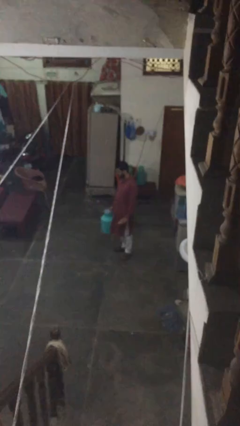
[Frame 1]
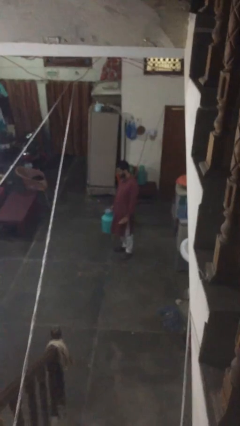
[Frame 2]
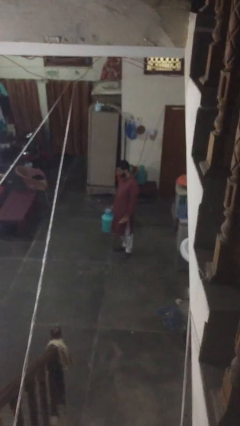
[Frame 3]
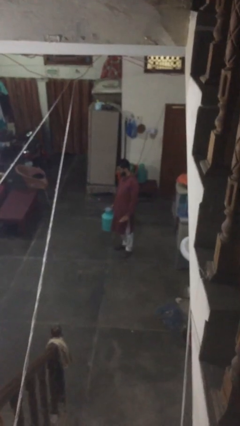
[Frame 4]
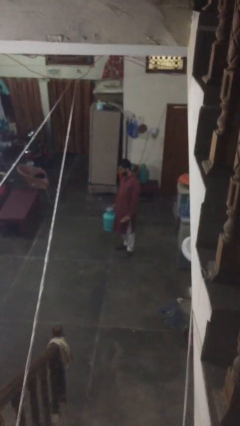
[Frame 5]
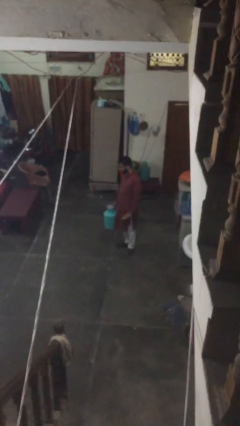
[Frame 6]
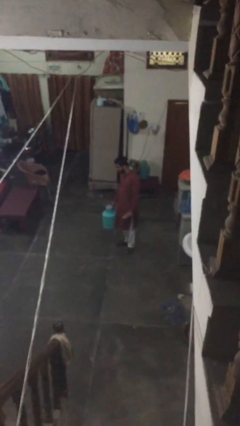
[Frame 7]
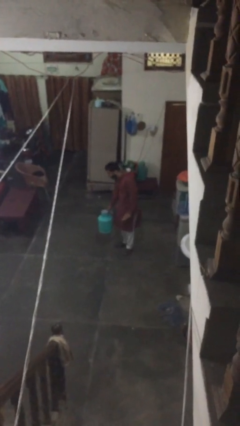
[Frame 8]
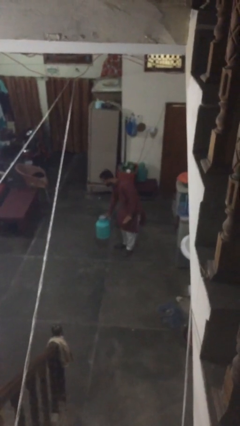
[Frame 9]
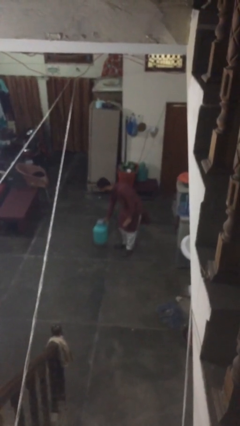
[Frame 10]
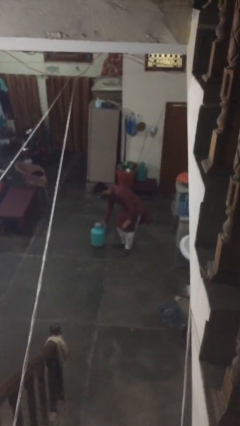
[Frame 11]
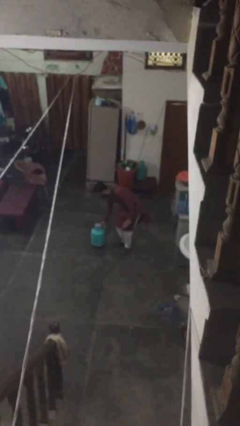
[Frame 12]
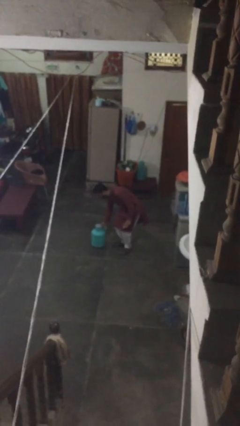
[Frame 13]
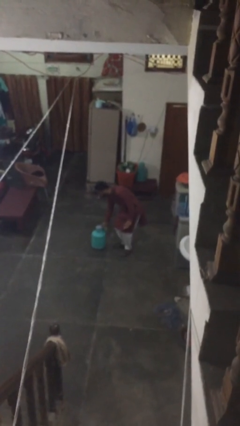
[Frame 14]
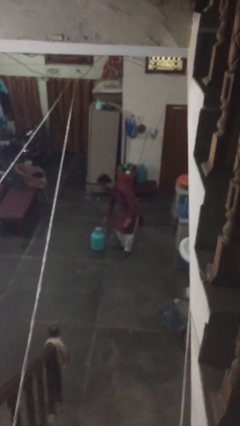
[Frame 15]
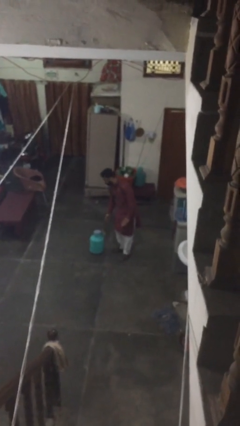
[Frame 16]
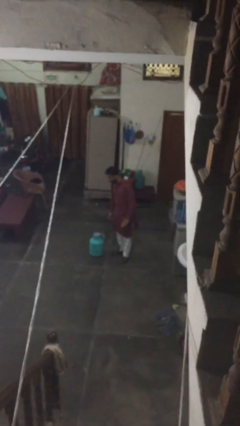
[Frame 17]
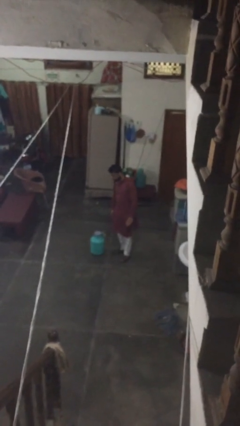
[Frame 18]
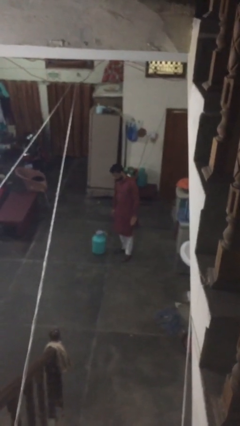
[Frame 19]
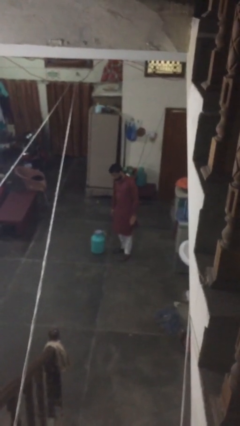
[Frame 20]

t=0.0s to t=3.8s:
person puts down object on floor

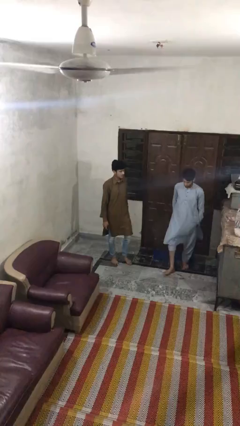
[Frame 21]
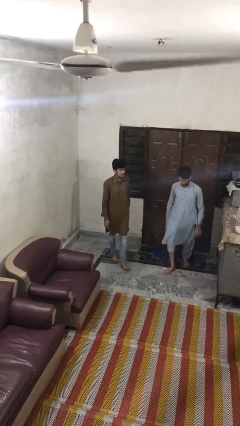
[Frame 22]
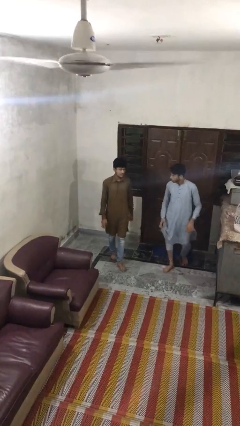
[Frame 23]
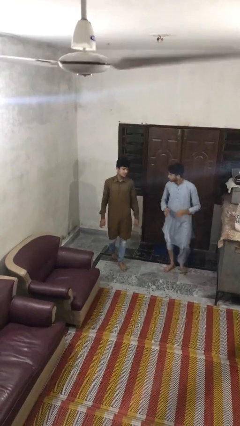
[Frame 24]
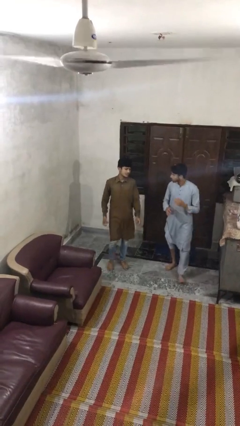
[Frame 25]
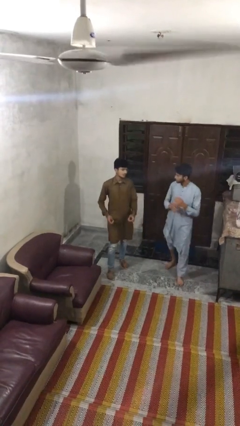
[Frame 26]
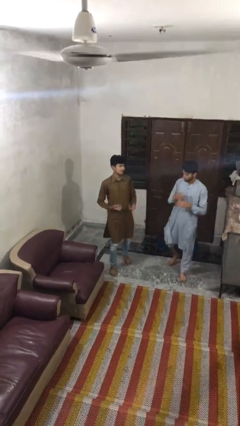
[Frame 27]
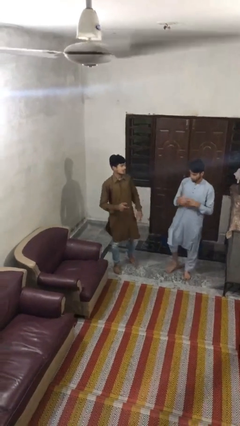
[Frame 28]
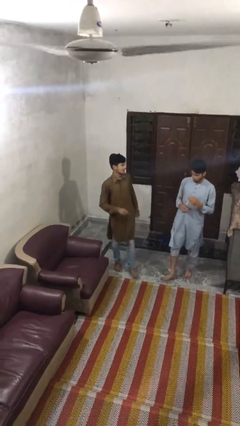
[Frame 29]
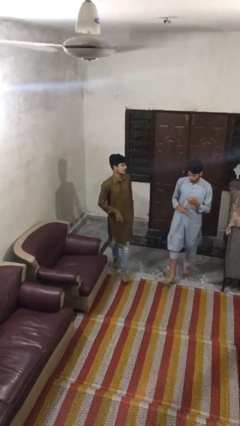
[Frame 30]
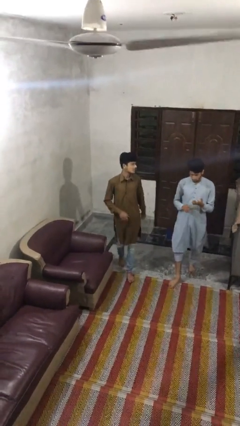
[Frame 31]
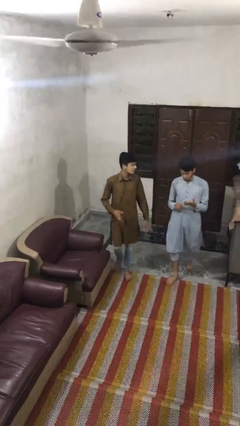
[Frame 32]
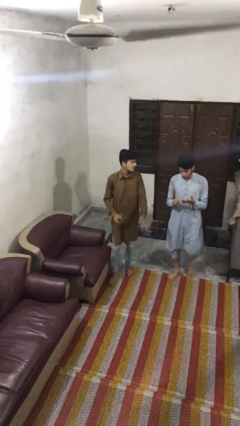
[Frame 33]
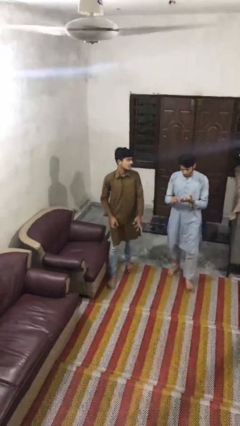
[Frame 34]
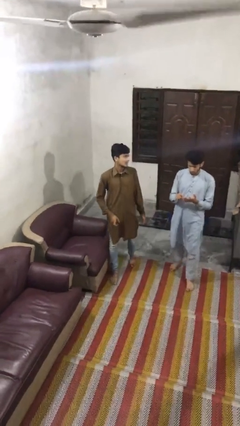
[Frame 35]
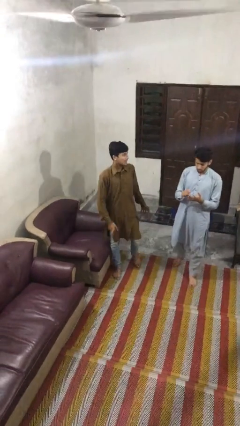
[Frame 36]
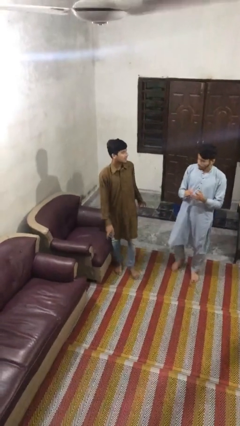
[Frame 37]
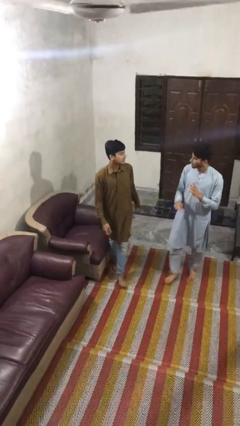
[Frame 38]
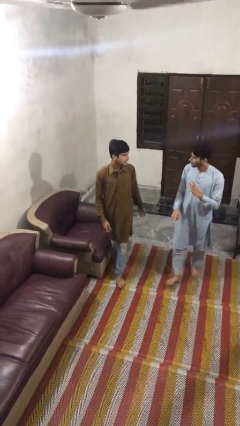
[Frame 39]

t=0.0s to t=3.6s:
person talks to person

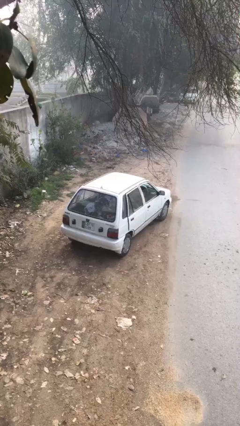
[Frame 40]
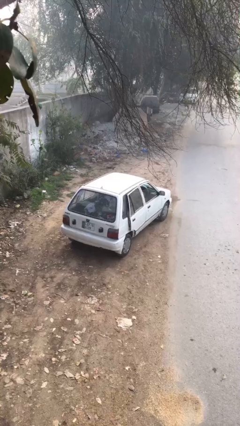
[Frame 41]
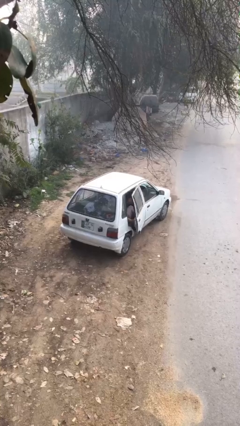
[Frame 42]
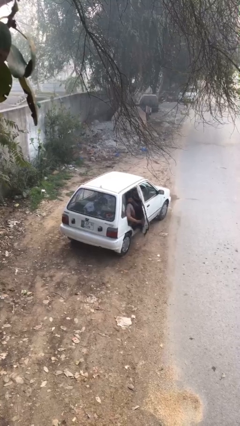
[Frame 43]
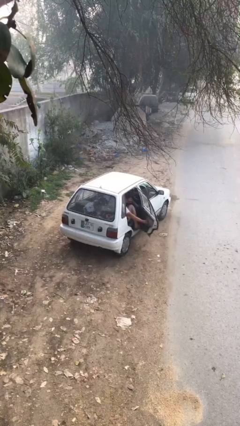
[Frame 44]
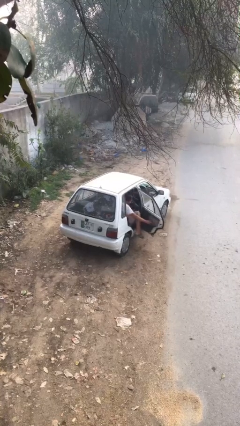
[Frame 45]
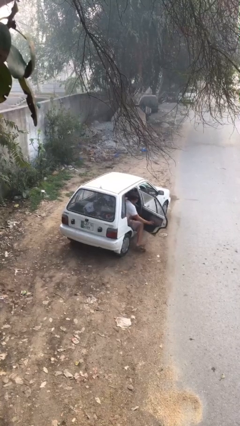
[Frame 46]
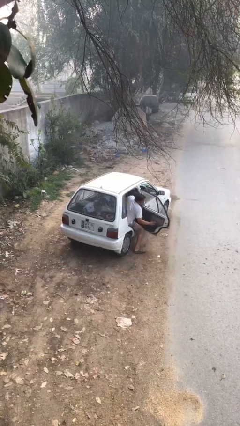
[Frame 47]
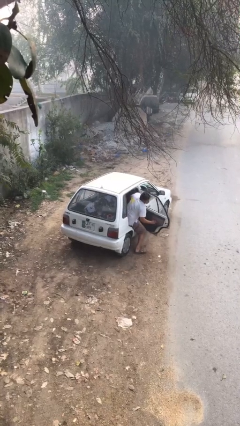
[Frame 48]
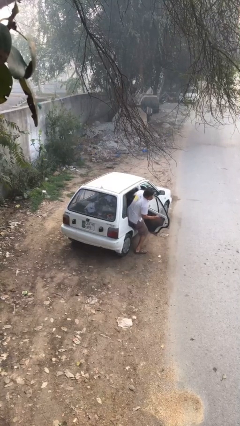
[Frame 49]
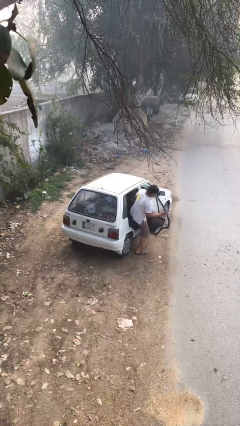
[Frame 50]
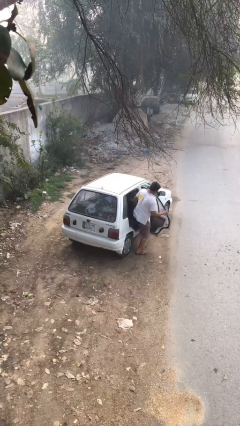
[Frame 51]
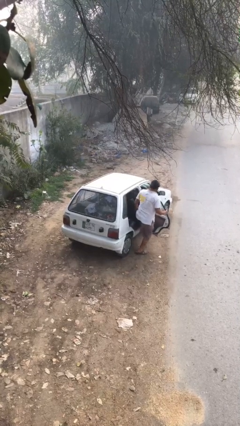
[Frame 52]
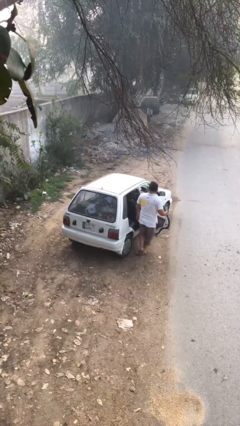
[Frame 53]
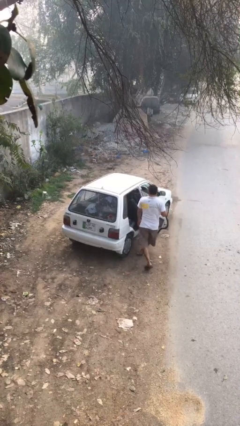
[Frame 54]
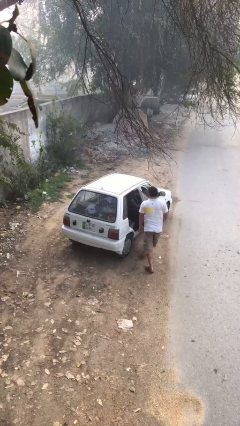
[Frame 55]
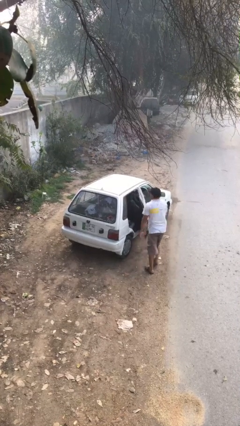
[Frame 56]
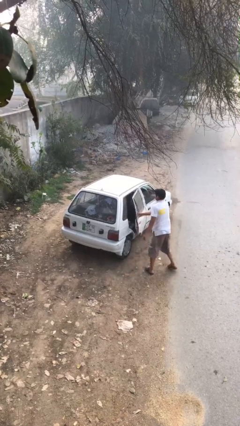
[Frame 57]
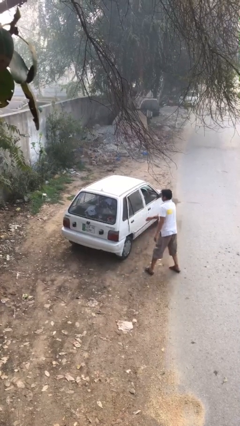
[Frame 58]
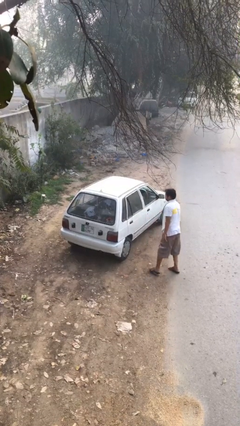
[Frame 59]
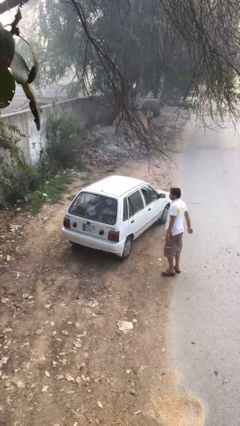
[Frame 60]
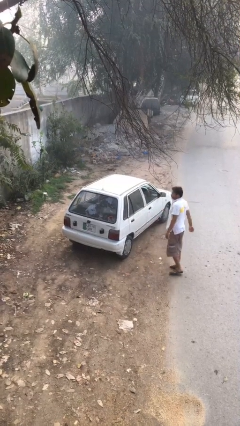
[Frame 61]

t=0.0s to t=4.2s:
car drops off person

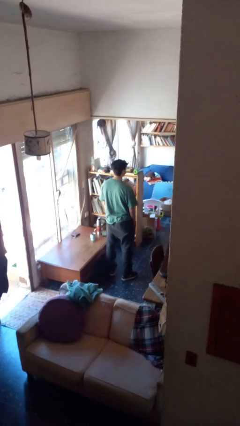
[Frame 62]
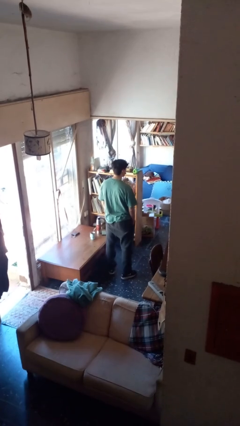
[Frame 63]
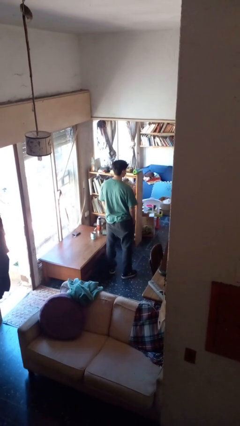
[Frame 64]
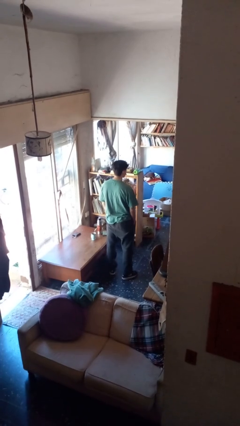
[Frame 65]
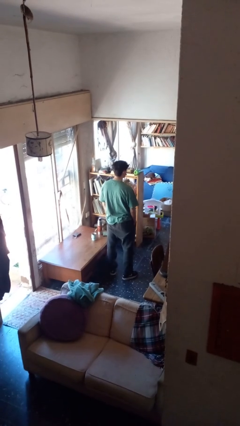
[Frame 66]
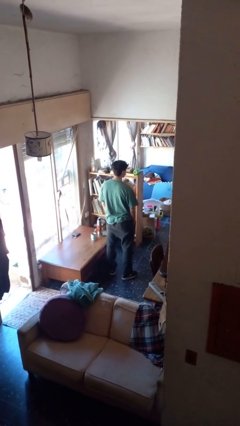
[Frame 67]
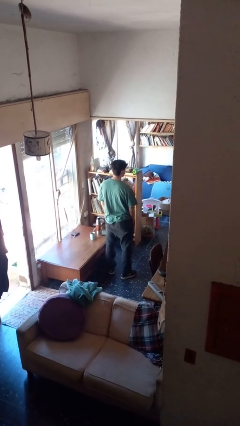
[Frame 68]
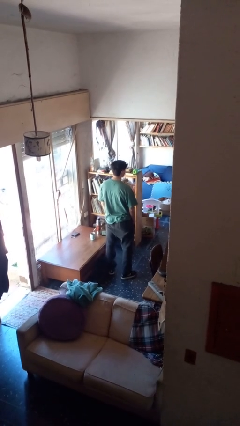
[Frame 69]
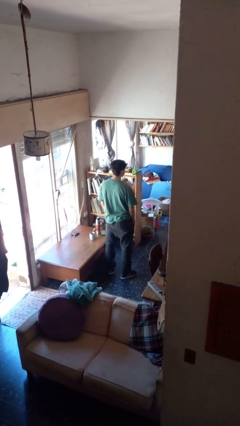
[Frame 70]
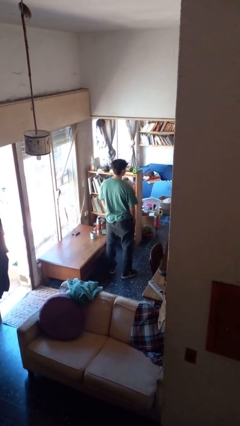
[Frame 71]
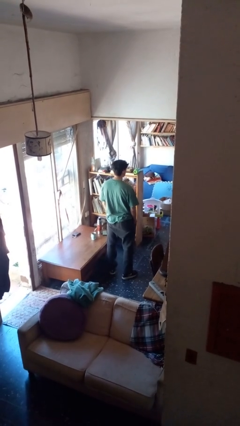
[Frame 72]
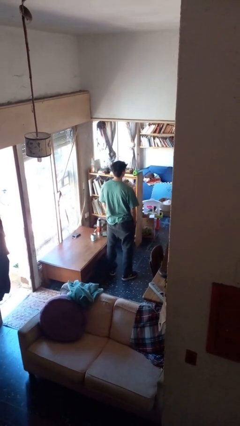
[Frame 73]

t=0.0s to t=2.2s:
person sticks out tongue

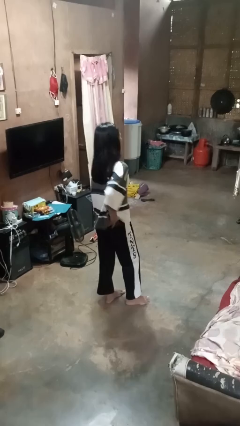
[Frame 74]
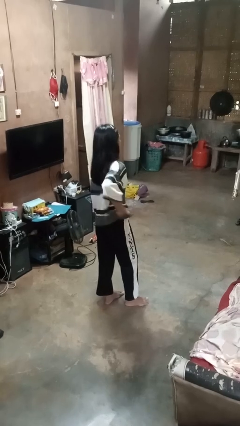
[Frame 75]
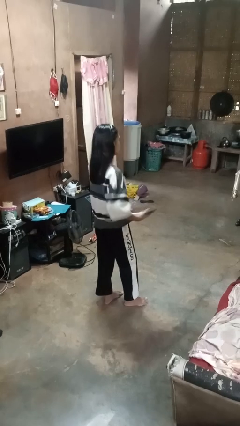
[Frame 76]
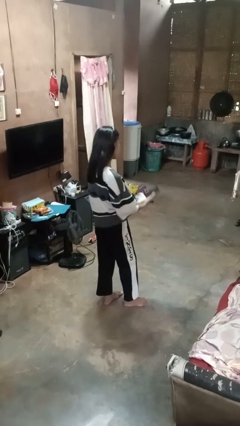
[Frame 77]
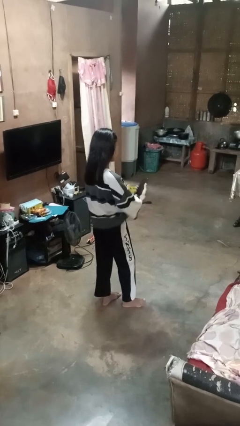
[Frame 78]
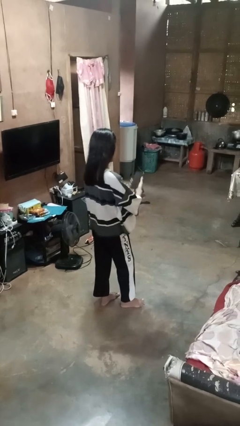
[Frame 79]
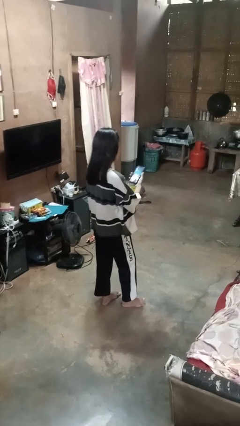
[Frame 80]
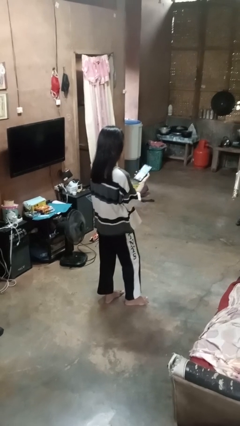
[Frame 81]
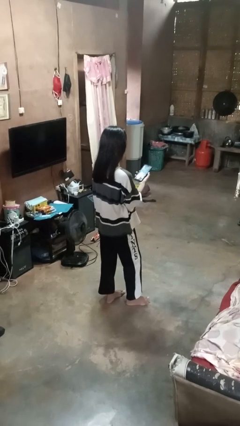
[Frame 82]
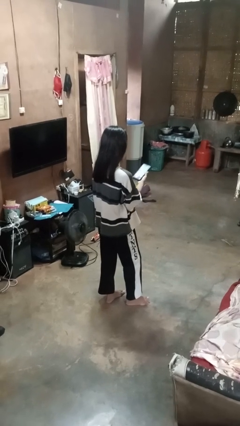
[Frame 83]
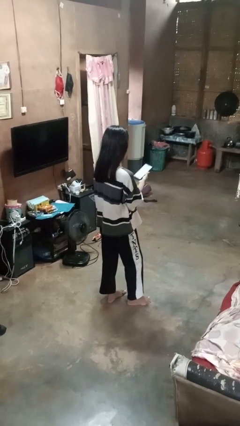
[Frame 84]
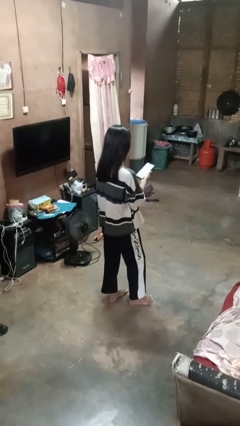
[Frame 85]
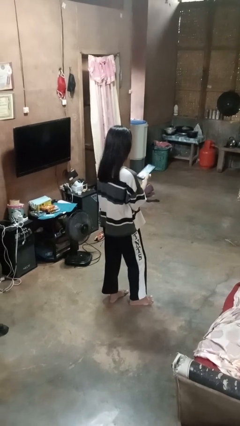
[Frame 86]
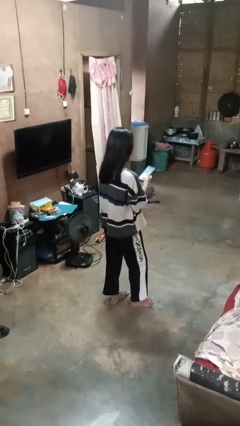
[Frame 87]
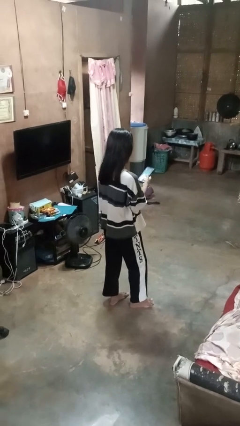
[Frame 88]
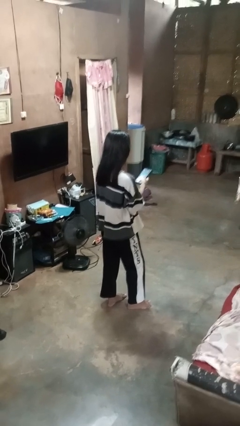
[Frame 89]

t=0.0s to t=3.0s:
person takes phone from pocket

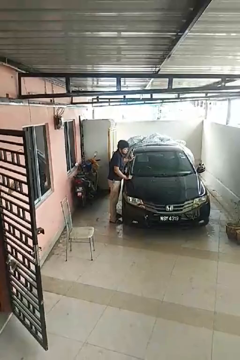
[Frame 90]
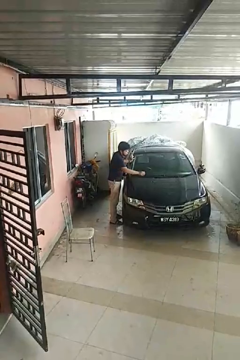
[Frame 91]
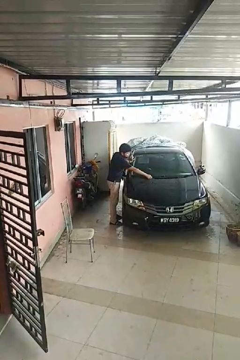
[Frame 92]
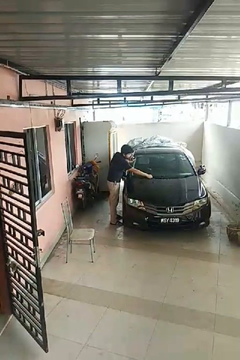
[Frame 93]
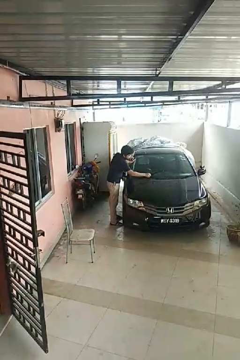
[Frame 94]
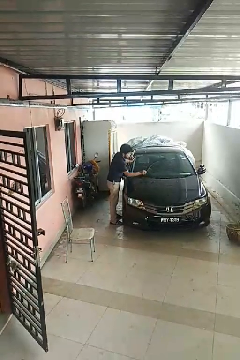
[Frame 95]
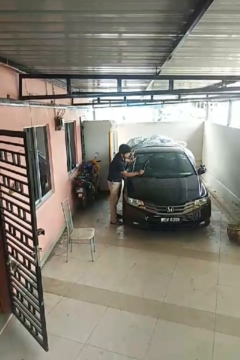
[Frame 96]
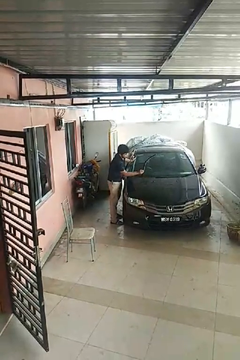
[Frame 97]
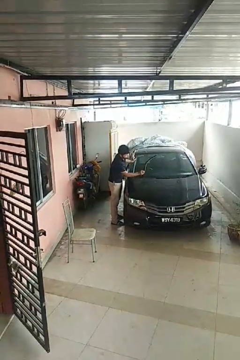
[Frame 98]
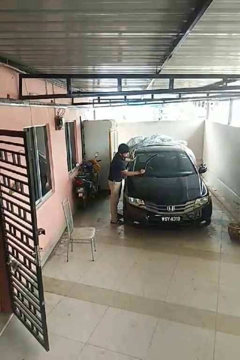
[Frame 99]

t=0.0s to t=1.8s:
person flips up car wipers
